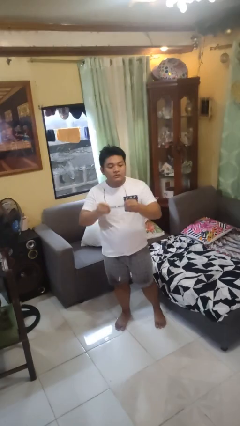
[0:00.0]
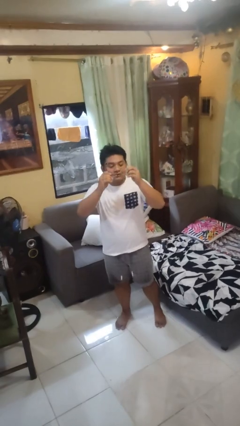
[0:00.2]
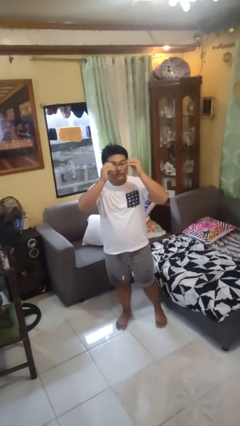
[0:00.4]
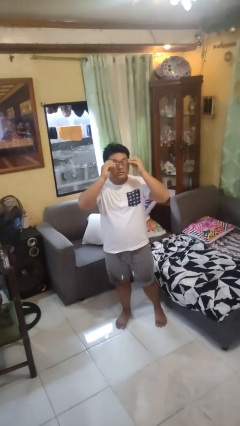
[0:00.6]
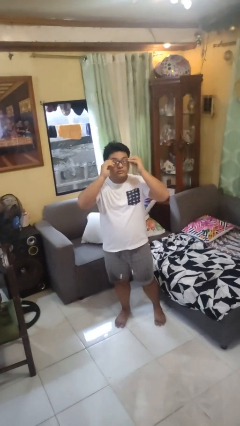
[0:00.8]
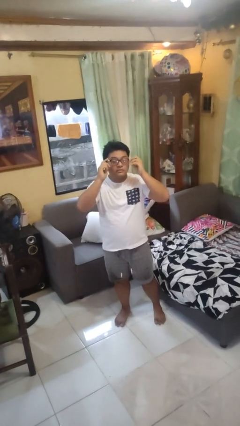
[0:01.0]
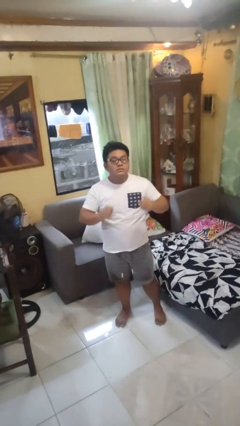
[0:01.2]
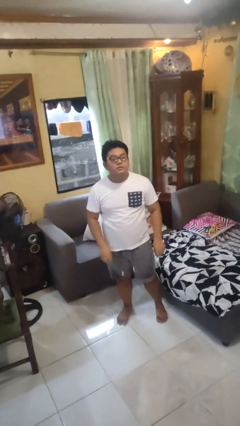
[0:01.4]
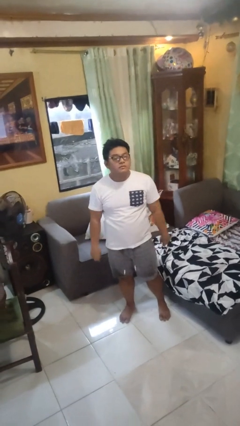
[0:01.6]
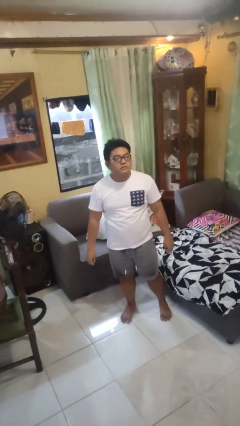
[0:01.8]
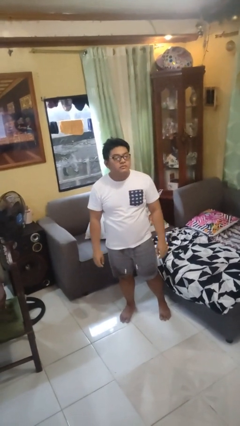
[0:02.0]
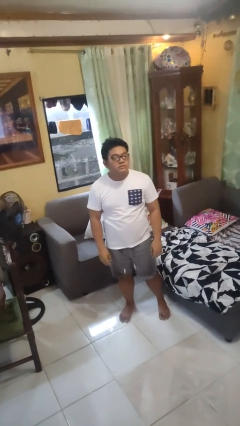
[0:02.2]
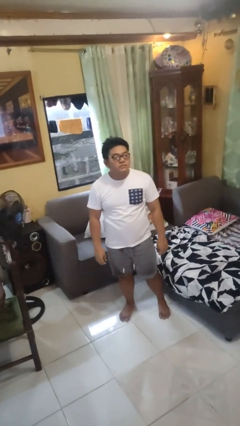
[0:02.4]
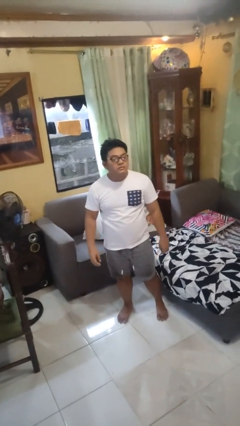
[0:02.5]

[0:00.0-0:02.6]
person puts on glasses

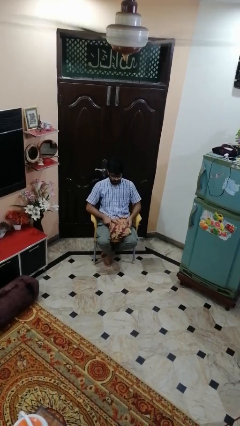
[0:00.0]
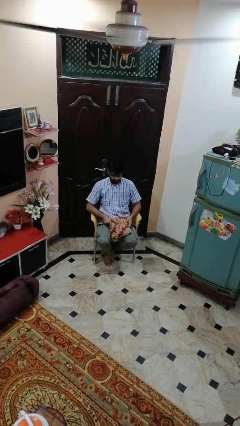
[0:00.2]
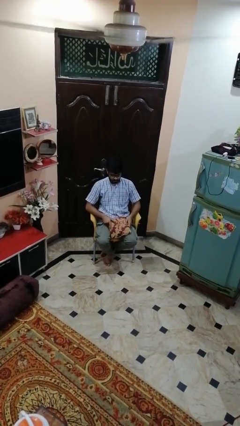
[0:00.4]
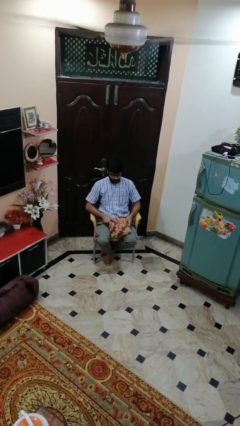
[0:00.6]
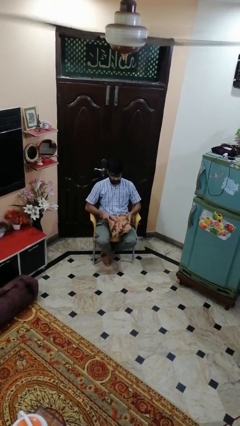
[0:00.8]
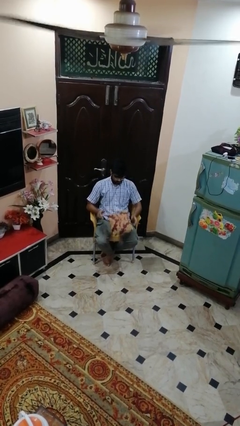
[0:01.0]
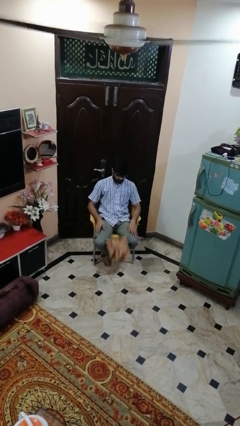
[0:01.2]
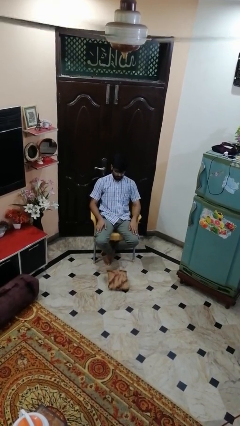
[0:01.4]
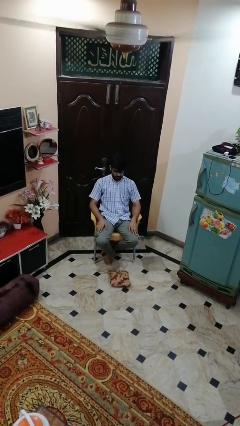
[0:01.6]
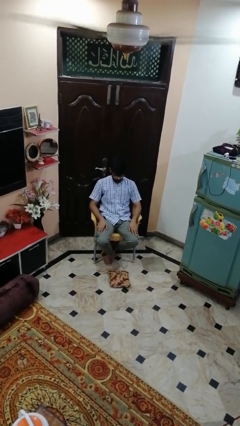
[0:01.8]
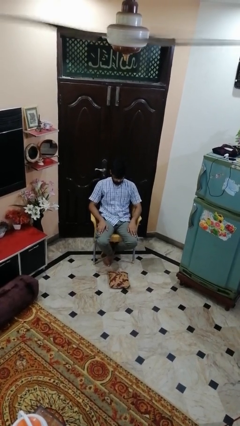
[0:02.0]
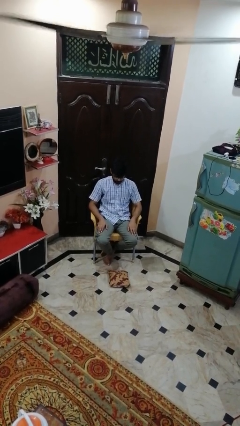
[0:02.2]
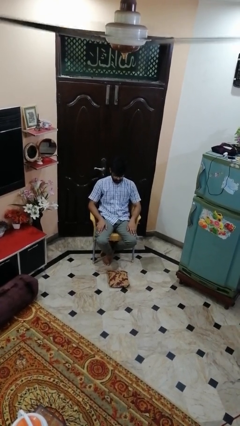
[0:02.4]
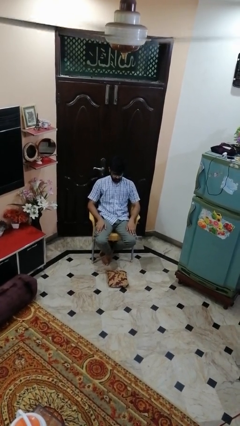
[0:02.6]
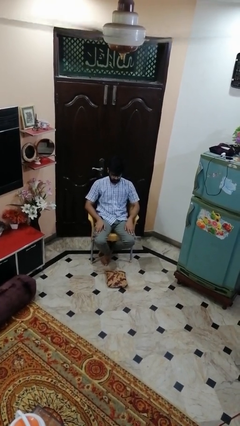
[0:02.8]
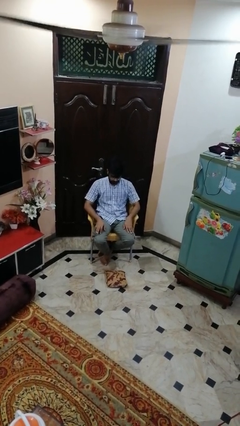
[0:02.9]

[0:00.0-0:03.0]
person drops object

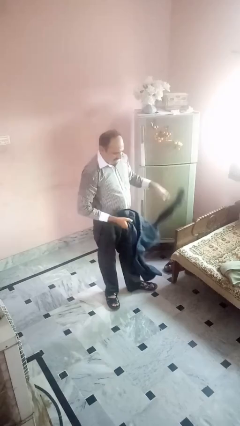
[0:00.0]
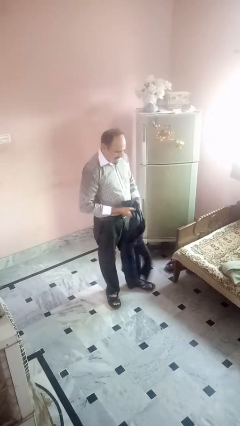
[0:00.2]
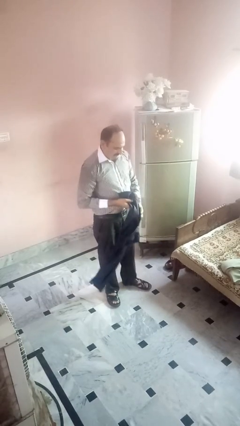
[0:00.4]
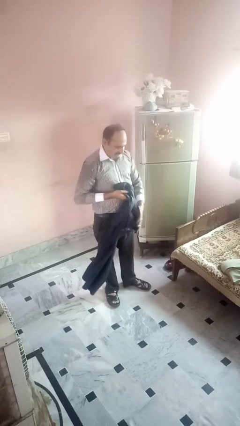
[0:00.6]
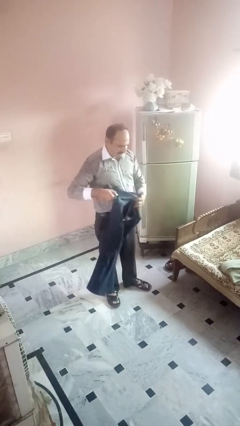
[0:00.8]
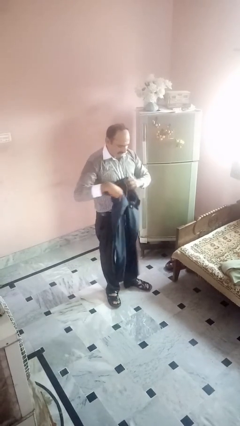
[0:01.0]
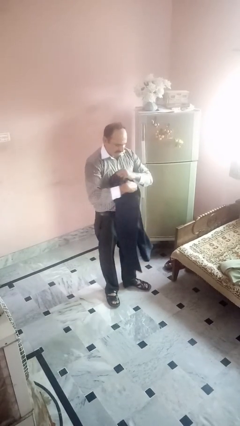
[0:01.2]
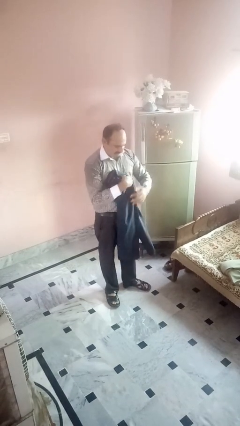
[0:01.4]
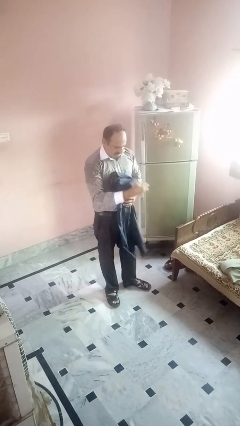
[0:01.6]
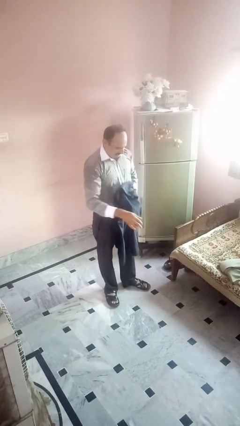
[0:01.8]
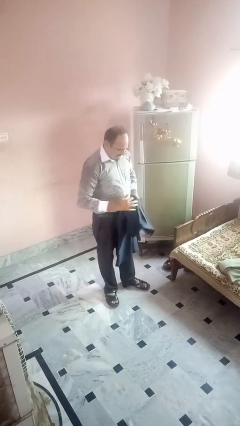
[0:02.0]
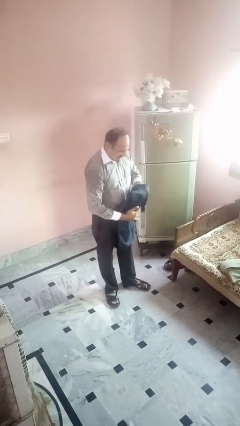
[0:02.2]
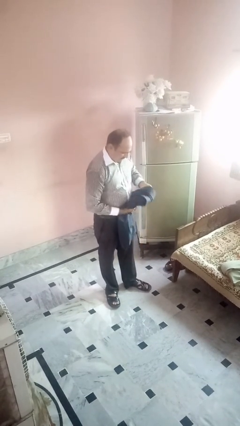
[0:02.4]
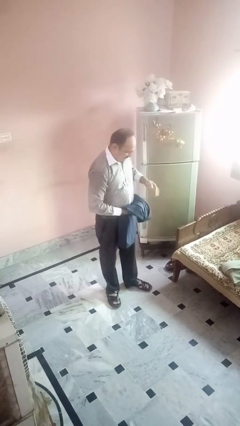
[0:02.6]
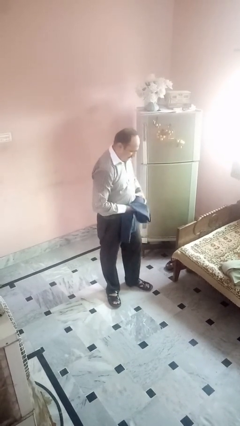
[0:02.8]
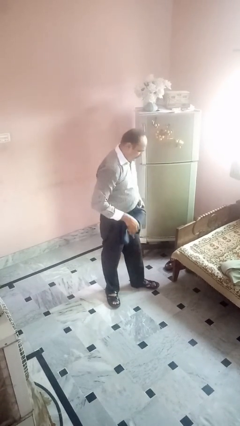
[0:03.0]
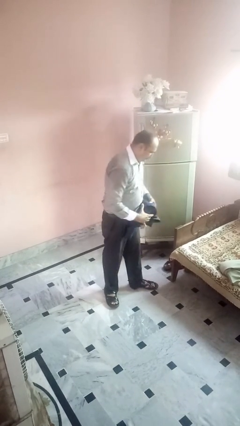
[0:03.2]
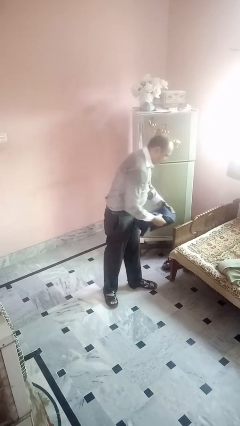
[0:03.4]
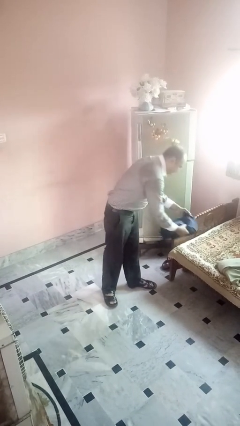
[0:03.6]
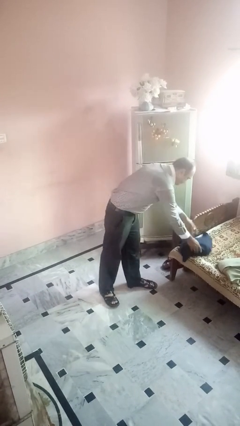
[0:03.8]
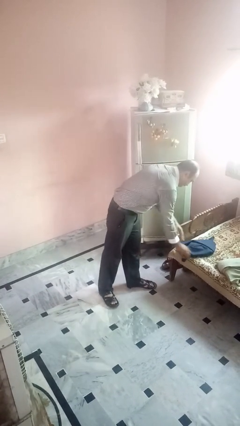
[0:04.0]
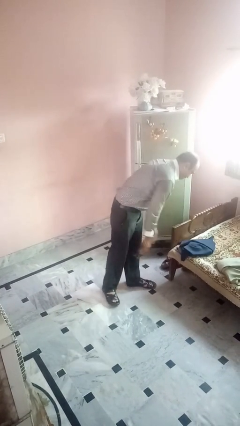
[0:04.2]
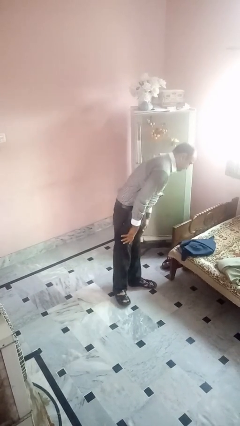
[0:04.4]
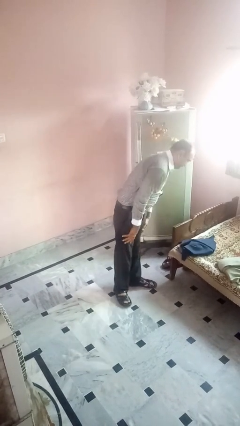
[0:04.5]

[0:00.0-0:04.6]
person folds pants

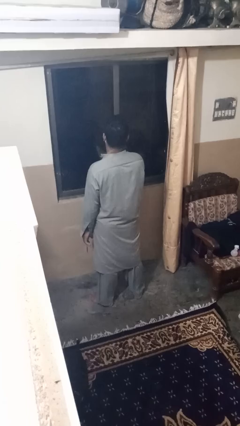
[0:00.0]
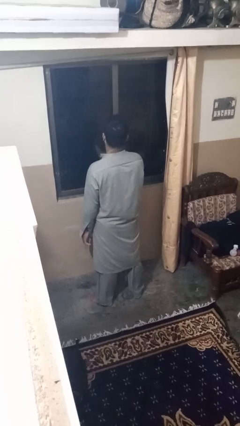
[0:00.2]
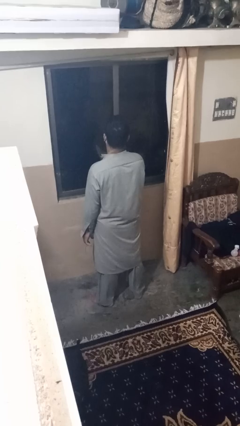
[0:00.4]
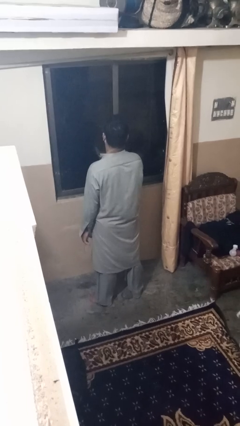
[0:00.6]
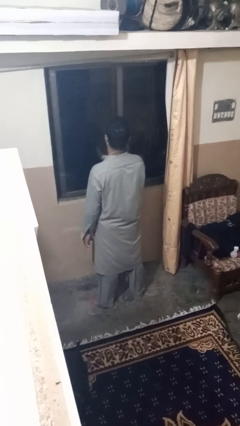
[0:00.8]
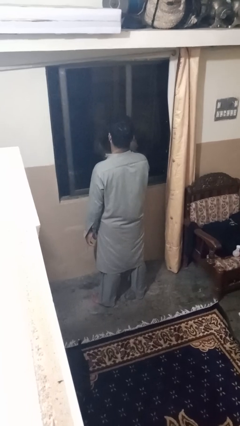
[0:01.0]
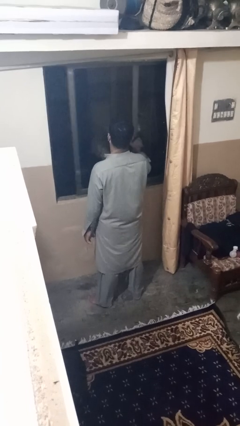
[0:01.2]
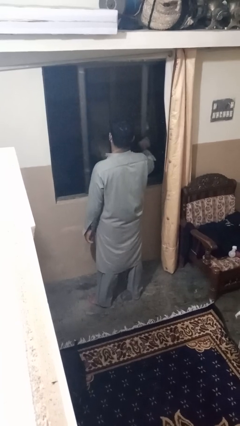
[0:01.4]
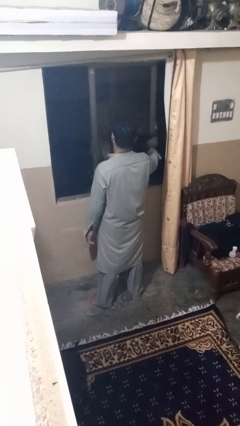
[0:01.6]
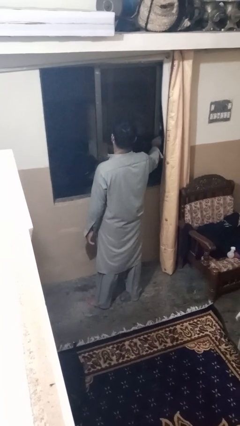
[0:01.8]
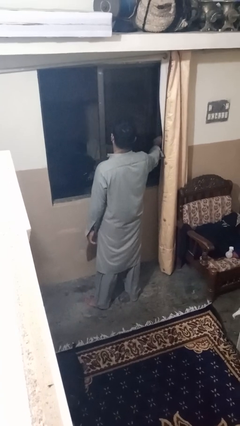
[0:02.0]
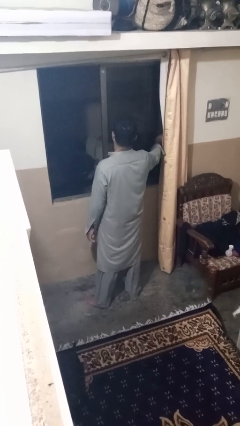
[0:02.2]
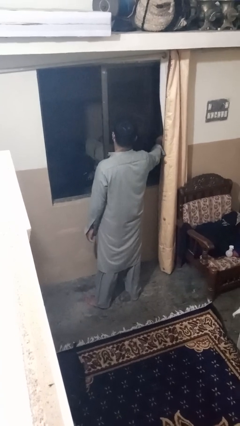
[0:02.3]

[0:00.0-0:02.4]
person opens home window

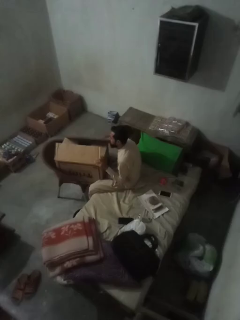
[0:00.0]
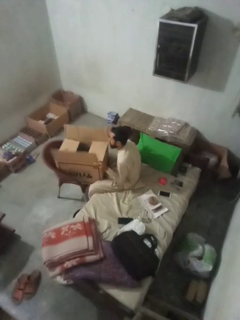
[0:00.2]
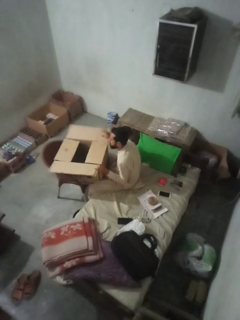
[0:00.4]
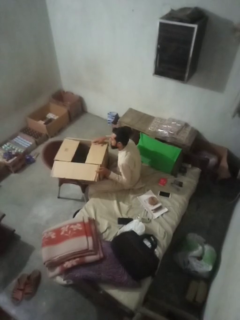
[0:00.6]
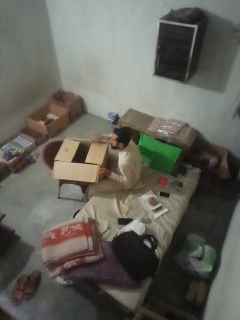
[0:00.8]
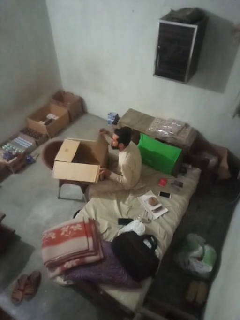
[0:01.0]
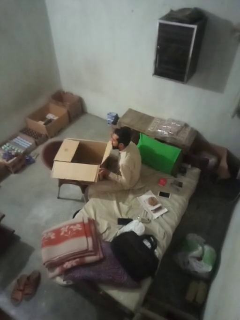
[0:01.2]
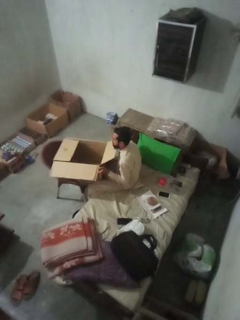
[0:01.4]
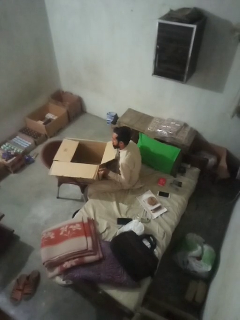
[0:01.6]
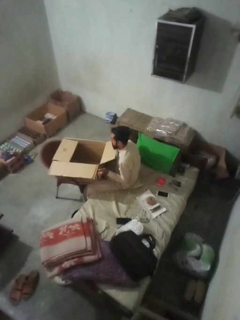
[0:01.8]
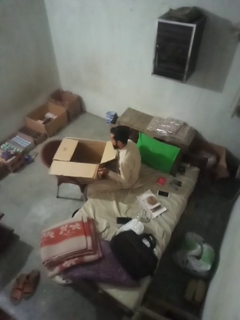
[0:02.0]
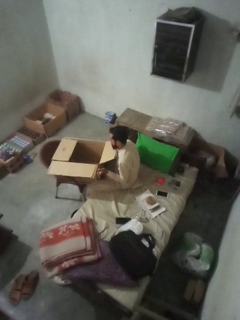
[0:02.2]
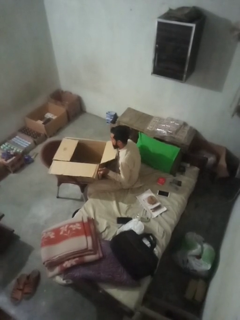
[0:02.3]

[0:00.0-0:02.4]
person opens box

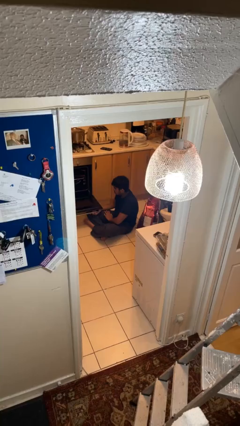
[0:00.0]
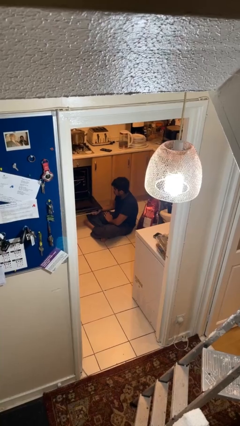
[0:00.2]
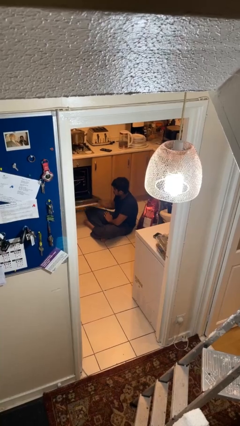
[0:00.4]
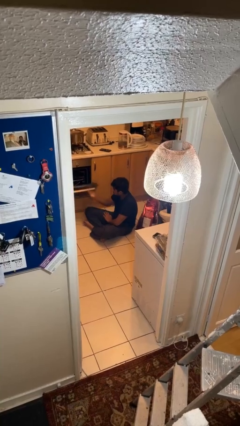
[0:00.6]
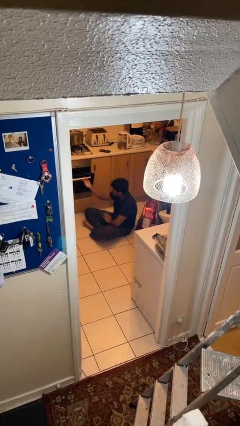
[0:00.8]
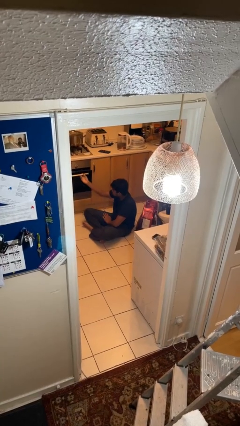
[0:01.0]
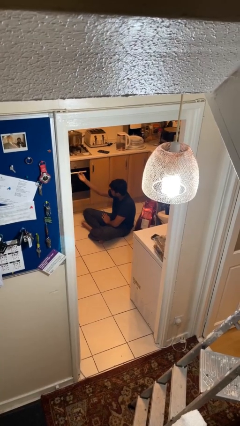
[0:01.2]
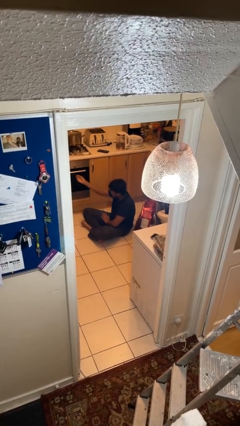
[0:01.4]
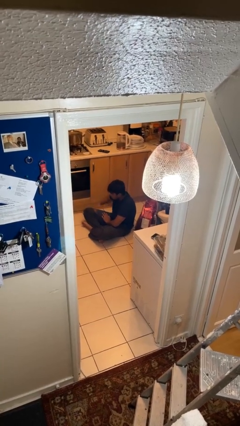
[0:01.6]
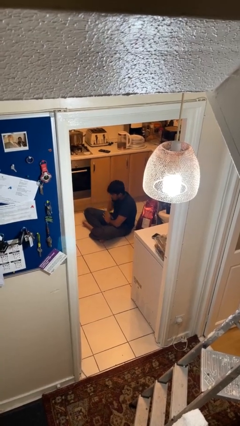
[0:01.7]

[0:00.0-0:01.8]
person closes oven door

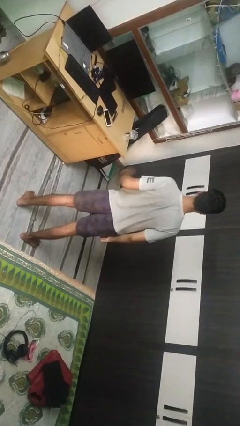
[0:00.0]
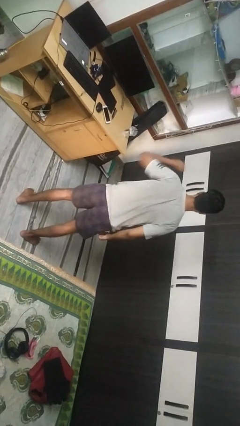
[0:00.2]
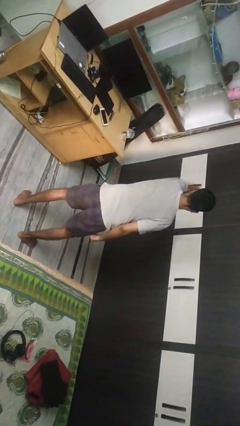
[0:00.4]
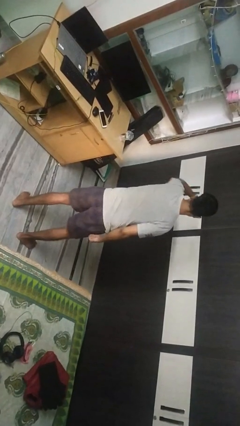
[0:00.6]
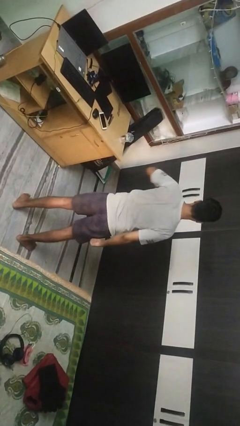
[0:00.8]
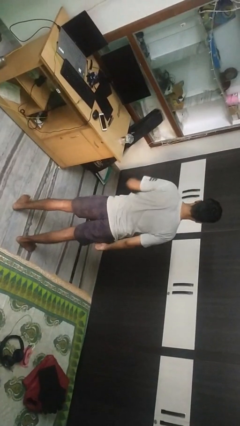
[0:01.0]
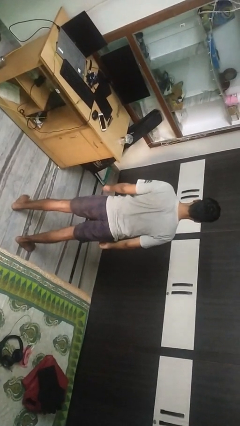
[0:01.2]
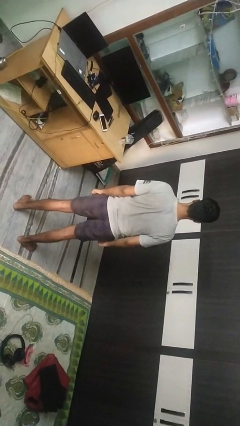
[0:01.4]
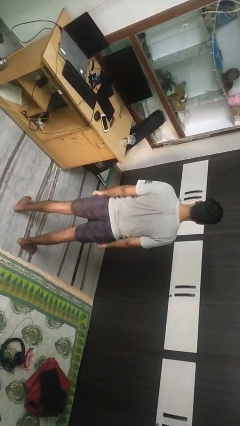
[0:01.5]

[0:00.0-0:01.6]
person punches
